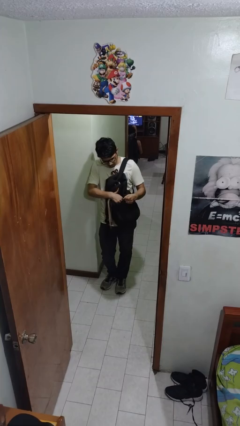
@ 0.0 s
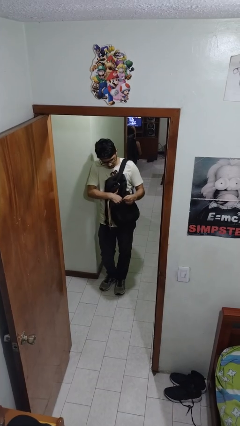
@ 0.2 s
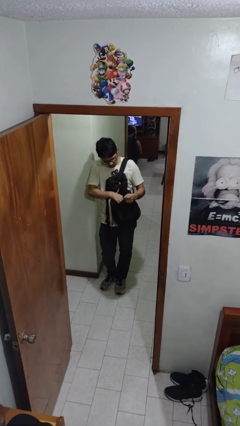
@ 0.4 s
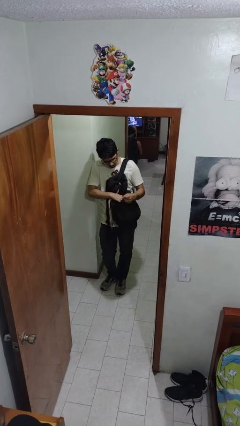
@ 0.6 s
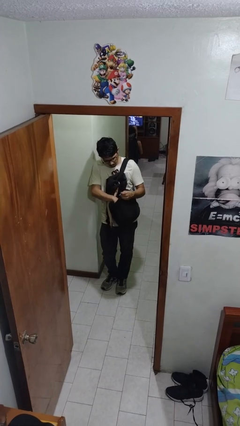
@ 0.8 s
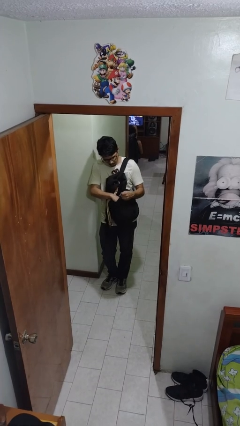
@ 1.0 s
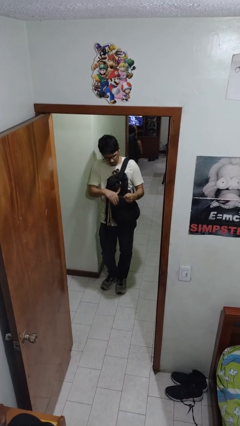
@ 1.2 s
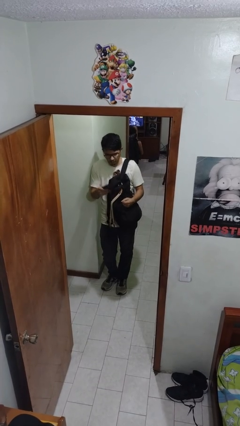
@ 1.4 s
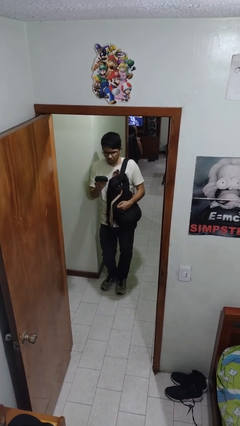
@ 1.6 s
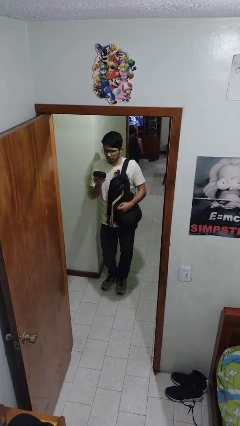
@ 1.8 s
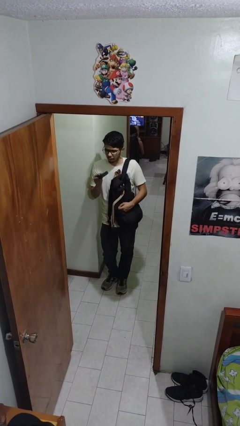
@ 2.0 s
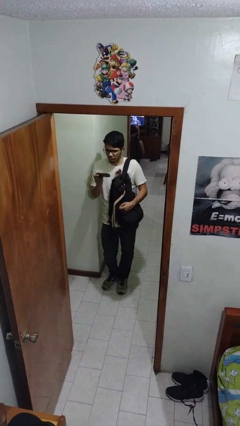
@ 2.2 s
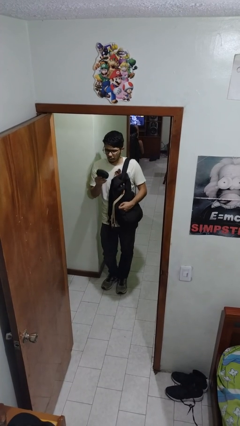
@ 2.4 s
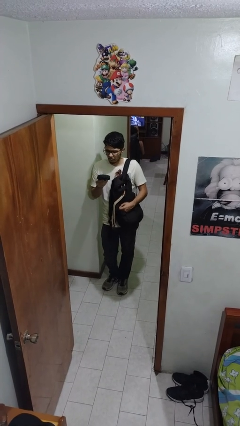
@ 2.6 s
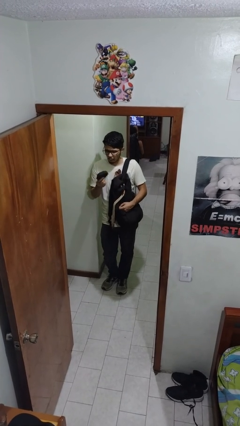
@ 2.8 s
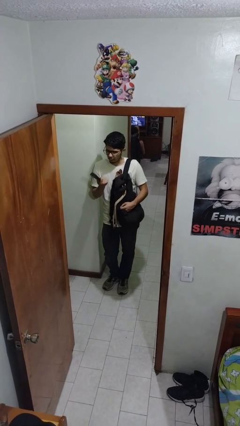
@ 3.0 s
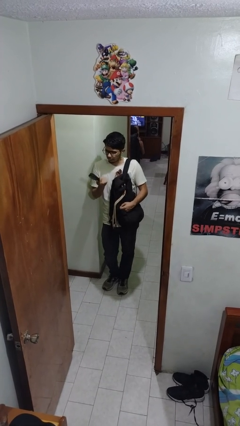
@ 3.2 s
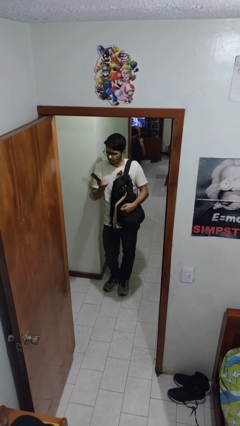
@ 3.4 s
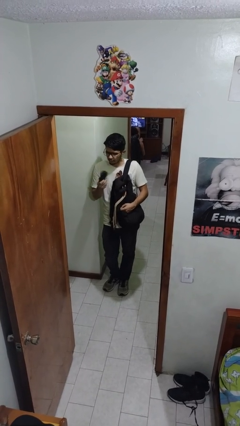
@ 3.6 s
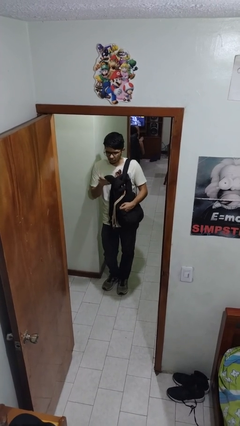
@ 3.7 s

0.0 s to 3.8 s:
person takes object from backpack

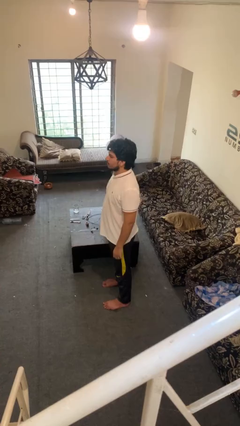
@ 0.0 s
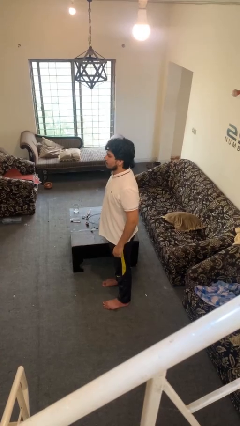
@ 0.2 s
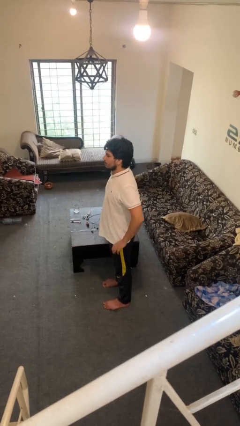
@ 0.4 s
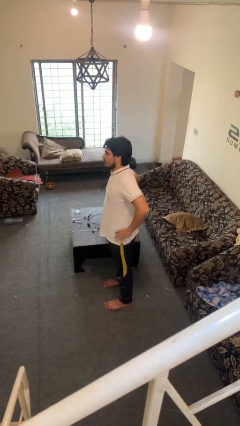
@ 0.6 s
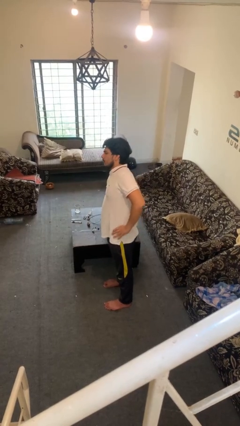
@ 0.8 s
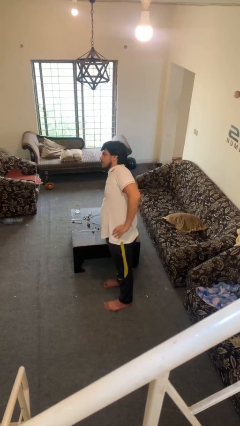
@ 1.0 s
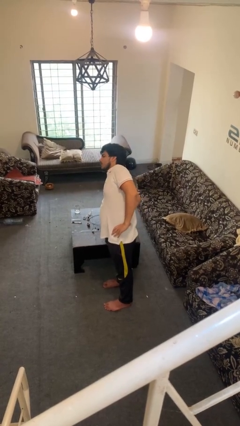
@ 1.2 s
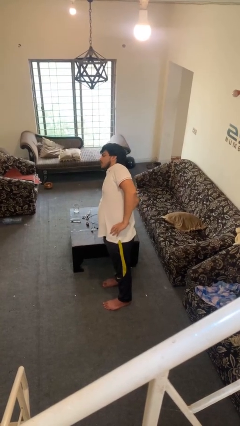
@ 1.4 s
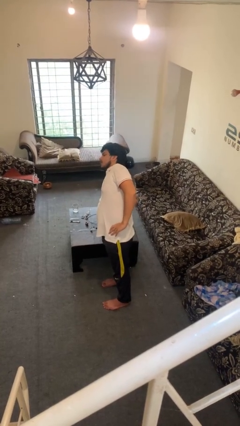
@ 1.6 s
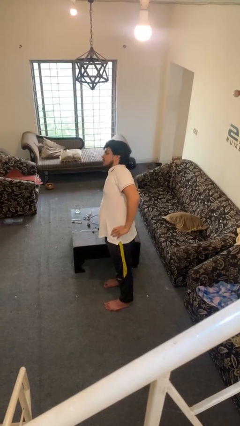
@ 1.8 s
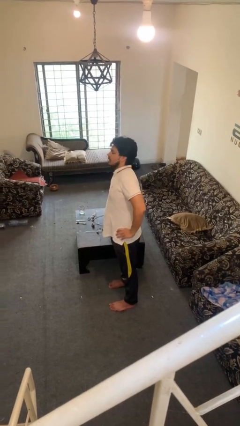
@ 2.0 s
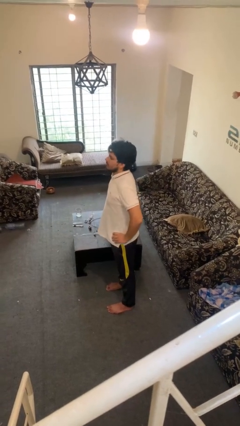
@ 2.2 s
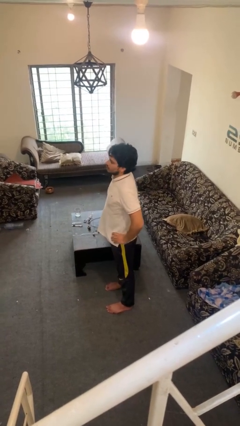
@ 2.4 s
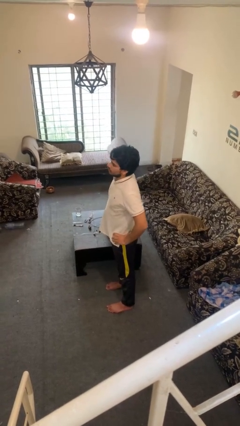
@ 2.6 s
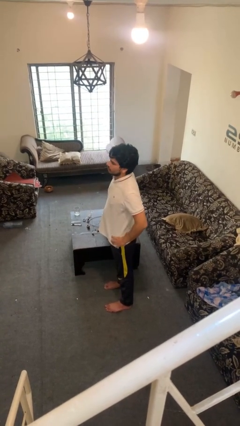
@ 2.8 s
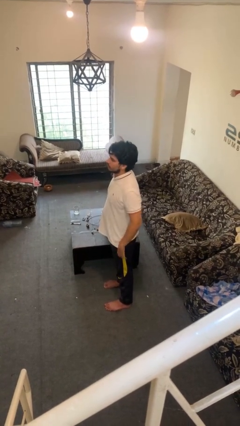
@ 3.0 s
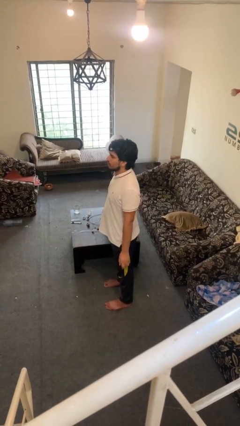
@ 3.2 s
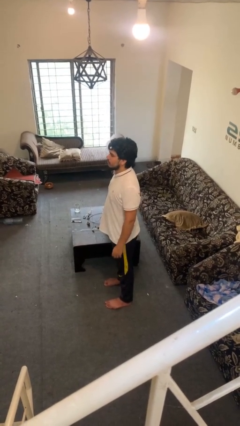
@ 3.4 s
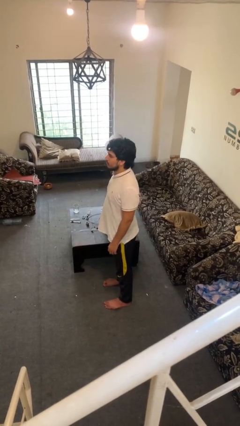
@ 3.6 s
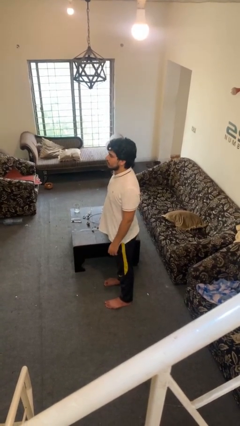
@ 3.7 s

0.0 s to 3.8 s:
person stretches arms to side

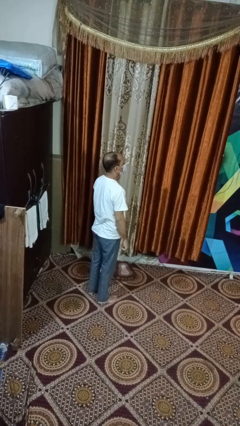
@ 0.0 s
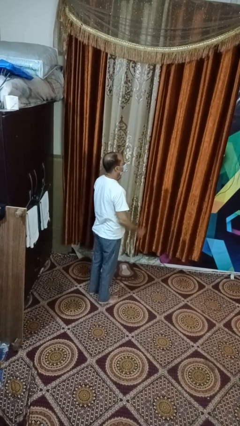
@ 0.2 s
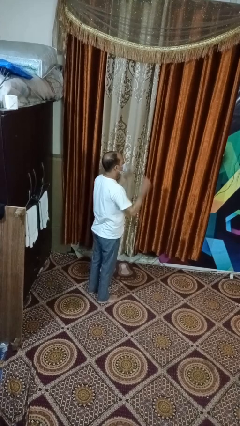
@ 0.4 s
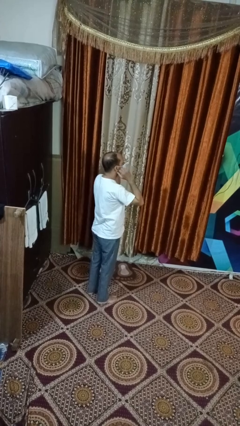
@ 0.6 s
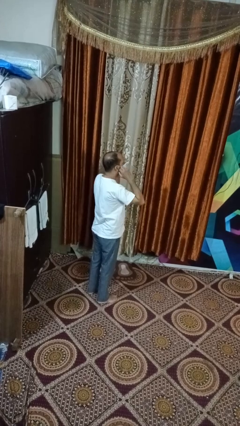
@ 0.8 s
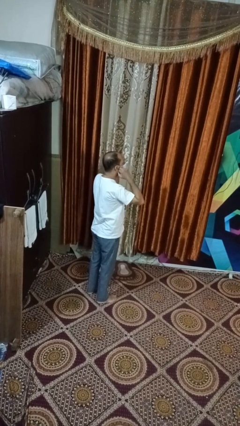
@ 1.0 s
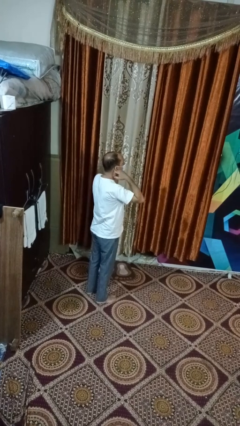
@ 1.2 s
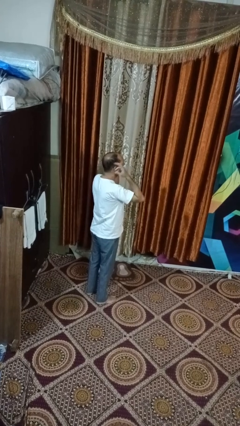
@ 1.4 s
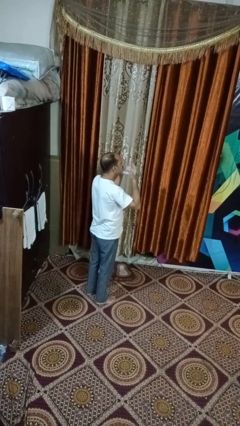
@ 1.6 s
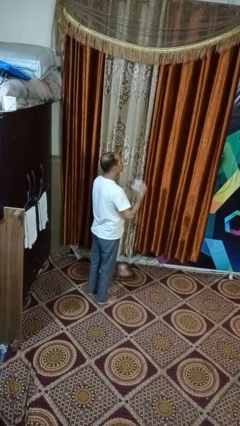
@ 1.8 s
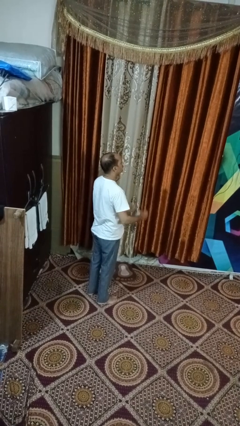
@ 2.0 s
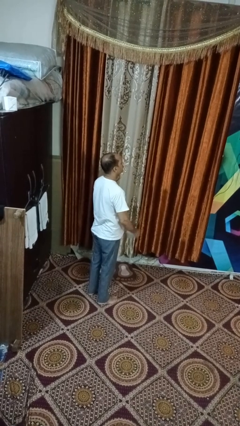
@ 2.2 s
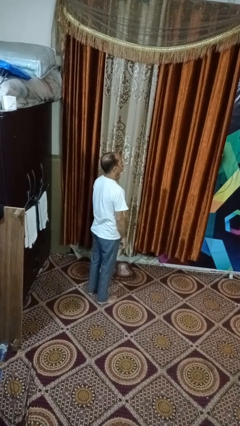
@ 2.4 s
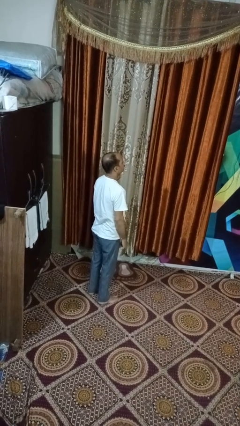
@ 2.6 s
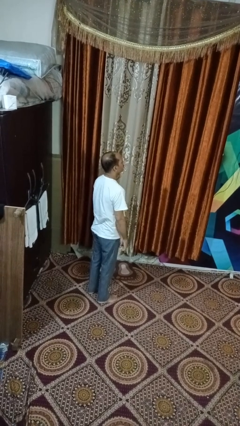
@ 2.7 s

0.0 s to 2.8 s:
person takes off facemask

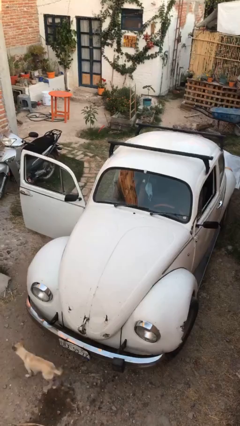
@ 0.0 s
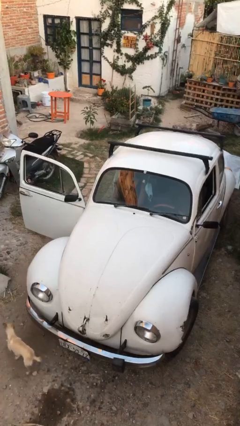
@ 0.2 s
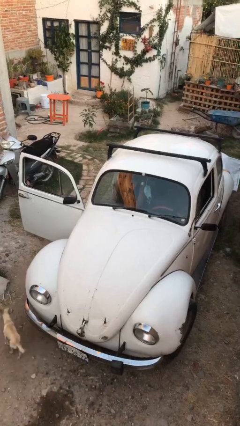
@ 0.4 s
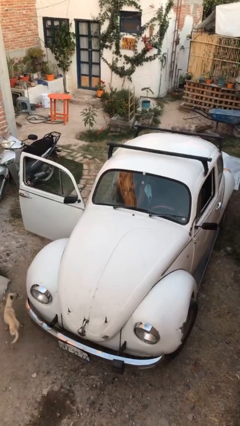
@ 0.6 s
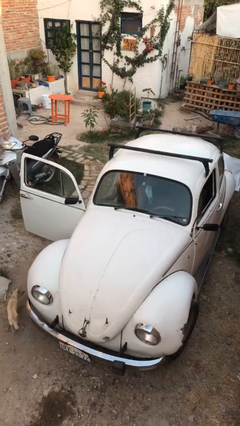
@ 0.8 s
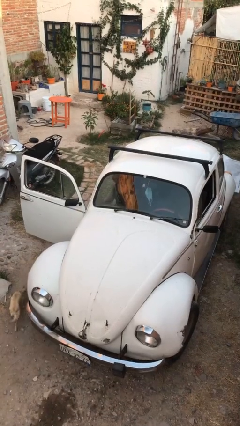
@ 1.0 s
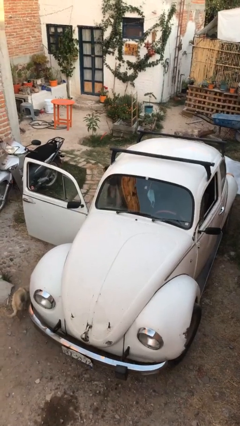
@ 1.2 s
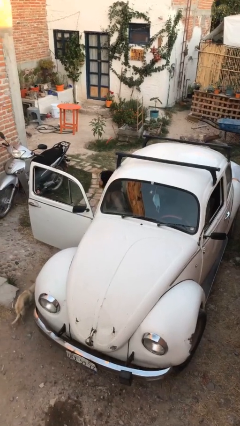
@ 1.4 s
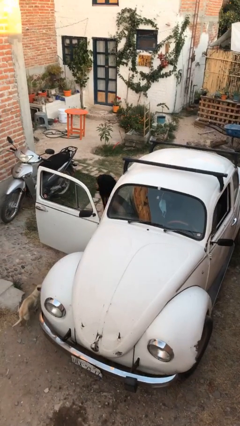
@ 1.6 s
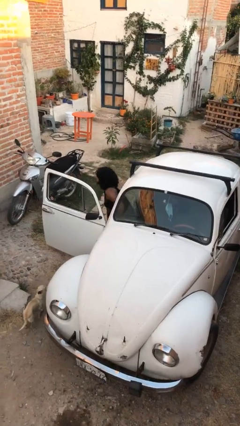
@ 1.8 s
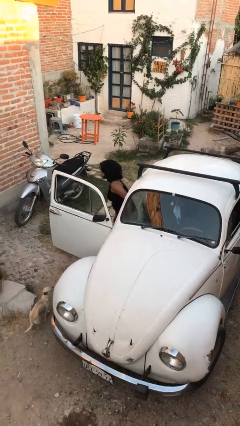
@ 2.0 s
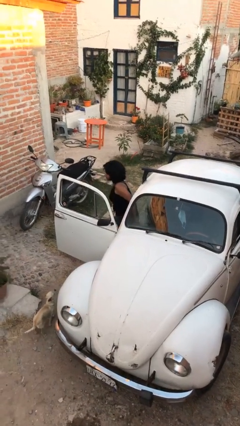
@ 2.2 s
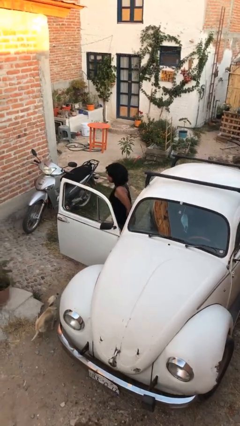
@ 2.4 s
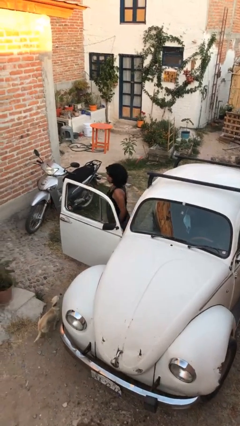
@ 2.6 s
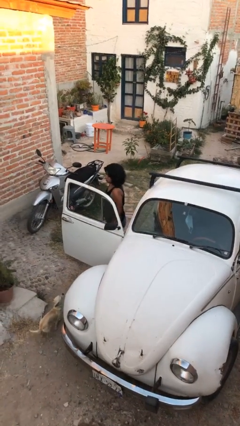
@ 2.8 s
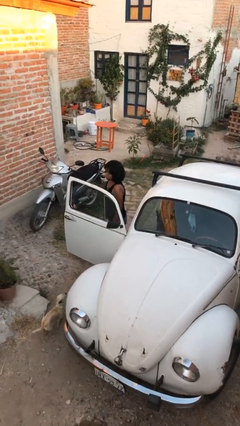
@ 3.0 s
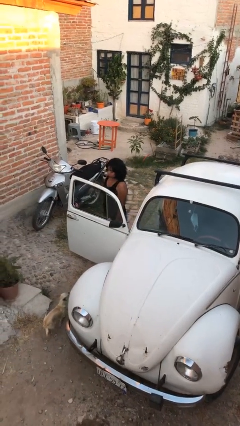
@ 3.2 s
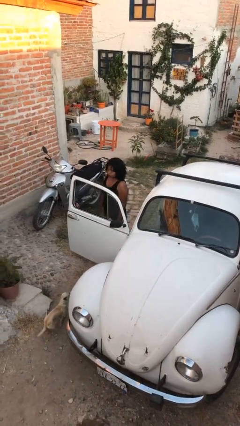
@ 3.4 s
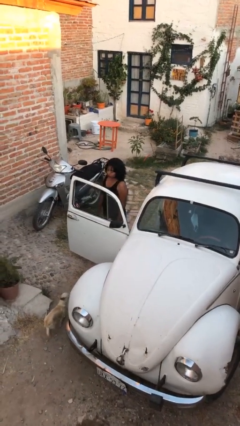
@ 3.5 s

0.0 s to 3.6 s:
person exits car

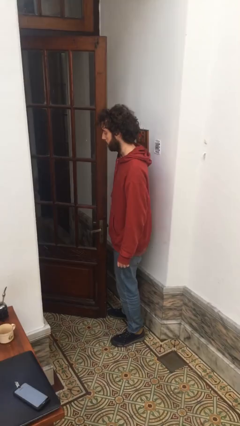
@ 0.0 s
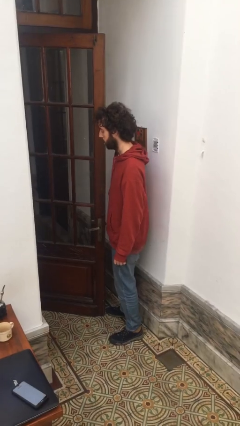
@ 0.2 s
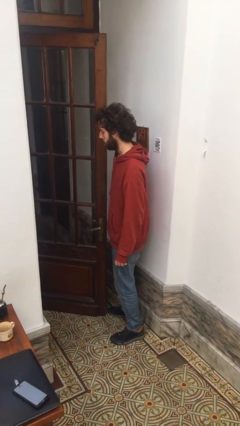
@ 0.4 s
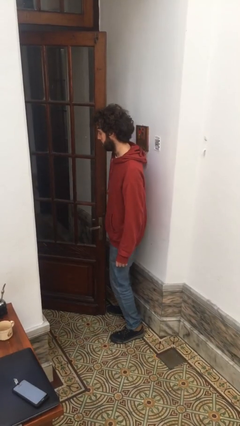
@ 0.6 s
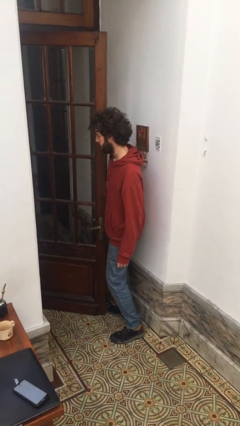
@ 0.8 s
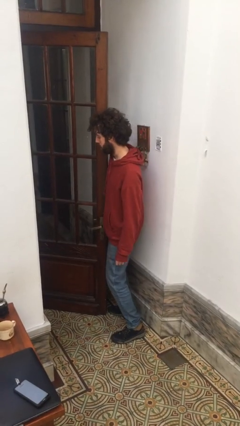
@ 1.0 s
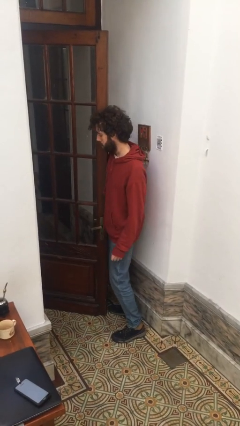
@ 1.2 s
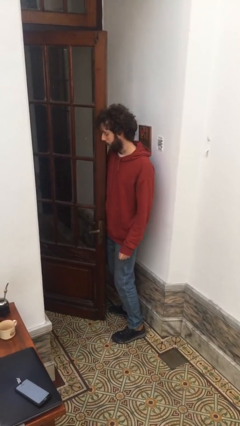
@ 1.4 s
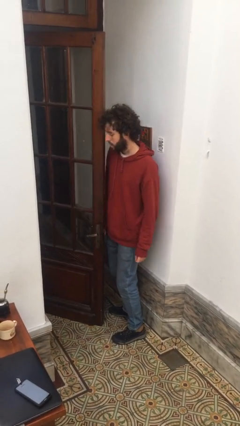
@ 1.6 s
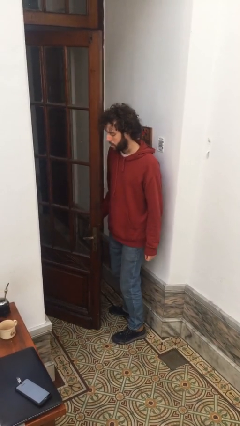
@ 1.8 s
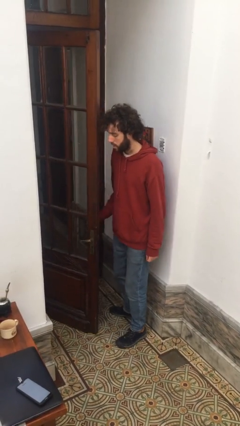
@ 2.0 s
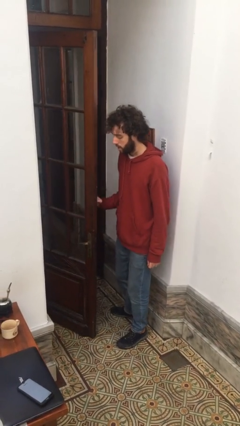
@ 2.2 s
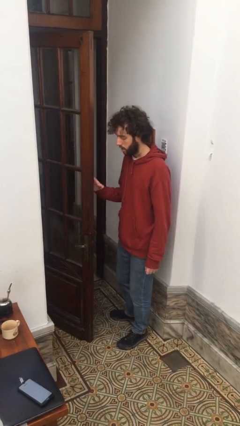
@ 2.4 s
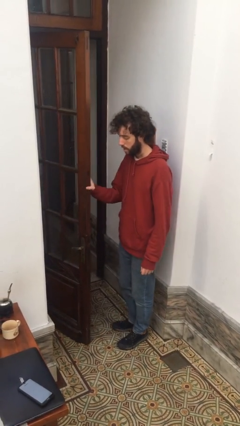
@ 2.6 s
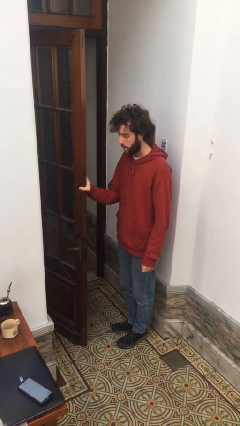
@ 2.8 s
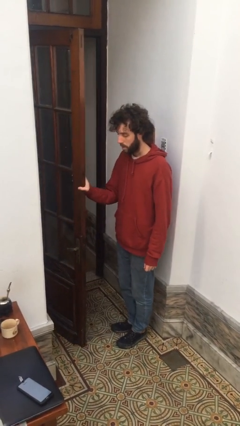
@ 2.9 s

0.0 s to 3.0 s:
person opens facility door

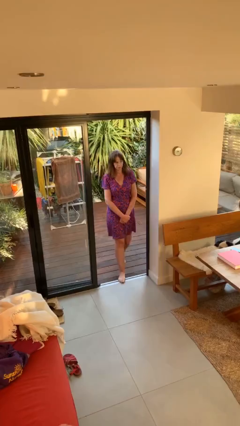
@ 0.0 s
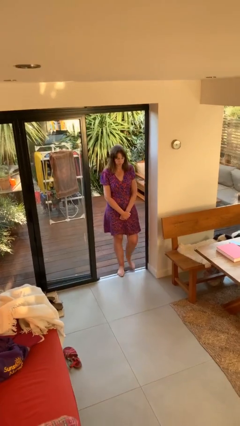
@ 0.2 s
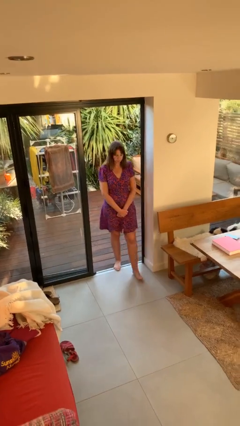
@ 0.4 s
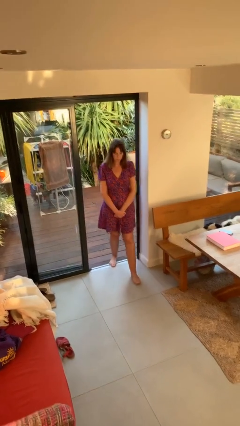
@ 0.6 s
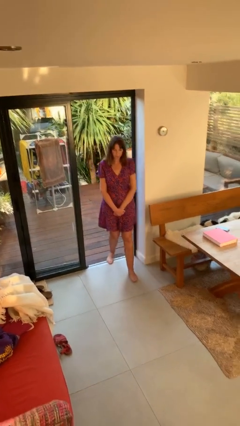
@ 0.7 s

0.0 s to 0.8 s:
person enters scene through structure
